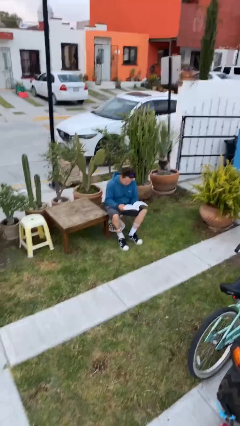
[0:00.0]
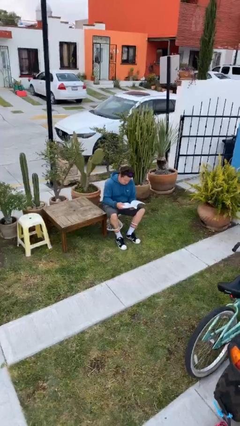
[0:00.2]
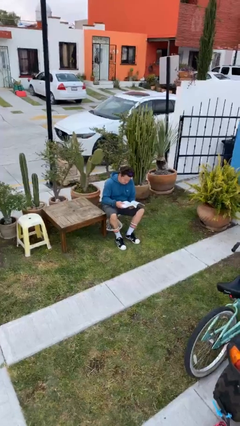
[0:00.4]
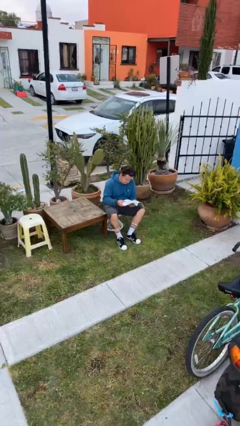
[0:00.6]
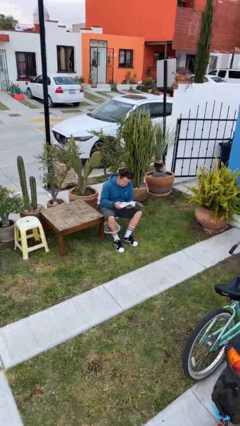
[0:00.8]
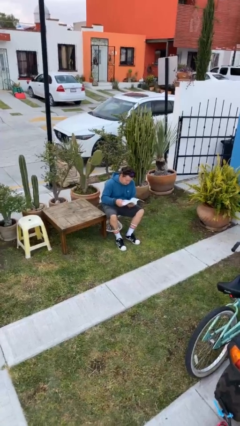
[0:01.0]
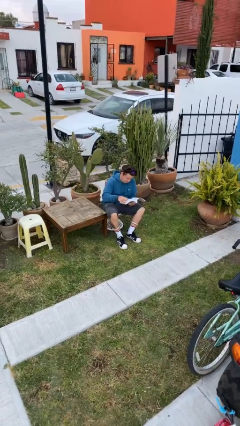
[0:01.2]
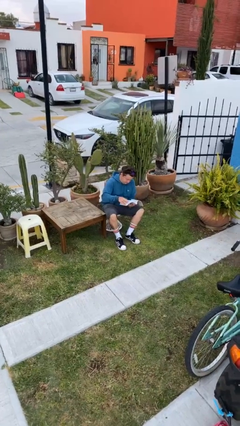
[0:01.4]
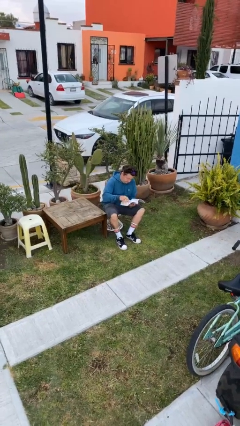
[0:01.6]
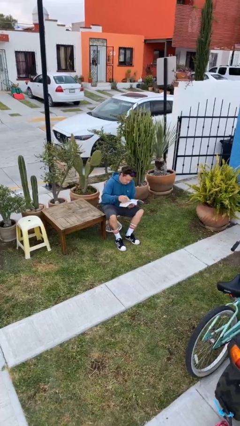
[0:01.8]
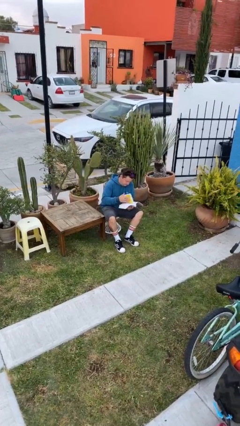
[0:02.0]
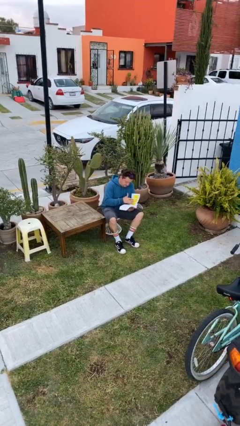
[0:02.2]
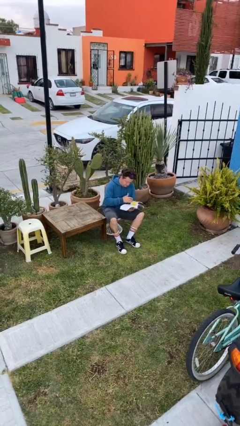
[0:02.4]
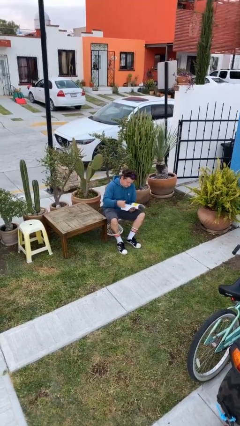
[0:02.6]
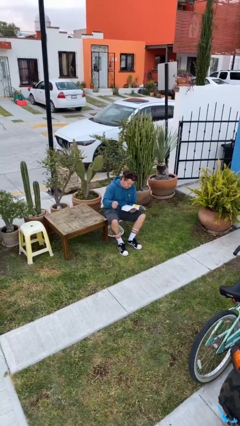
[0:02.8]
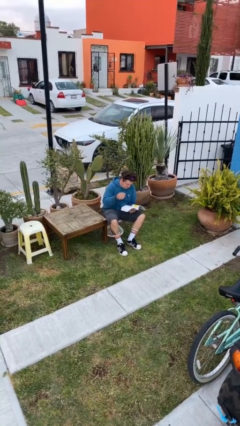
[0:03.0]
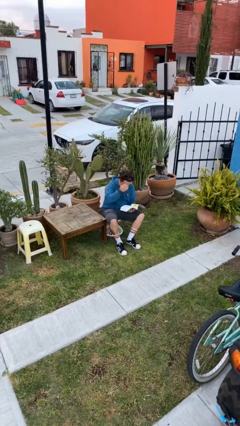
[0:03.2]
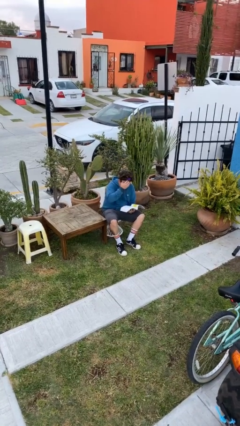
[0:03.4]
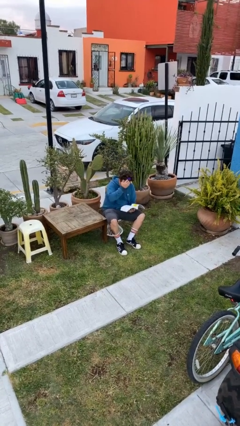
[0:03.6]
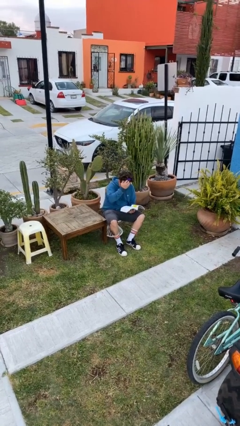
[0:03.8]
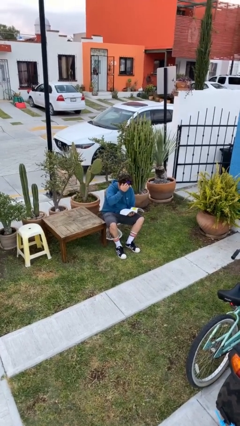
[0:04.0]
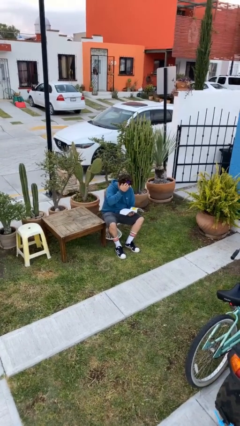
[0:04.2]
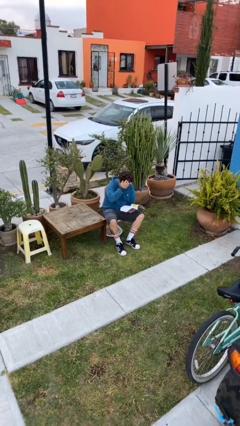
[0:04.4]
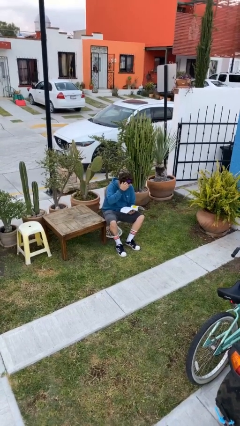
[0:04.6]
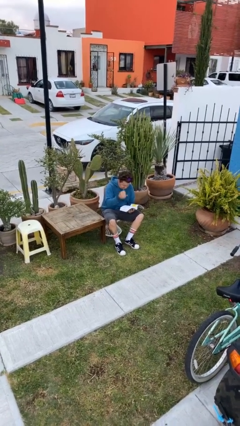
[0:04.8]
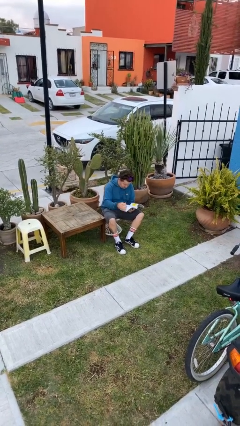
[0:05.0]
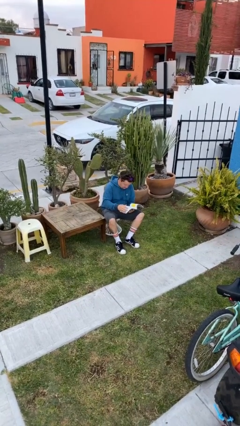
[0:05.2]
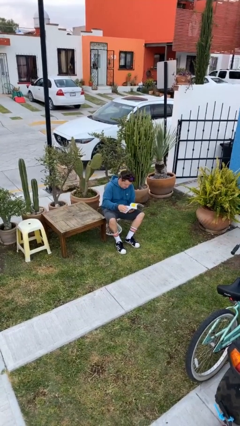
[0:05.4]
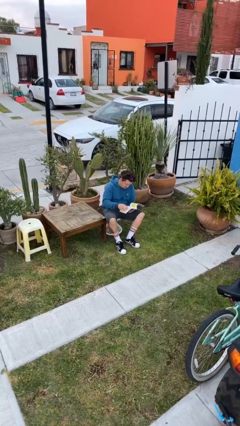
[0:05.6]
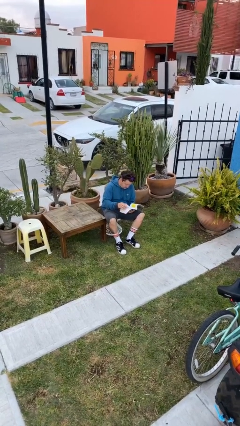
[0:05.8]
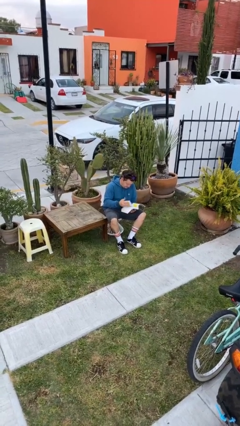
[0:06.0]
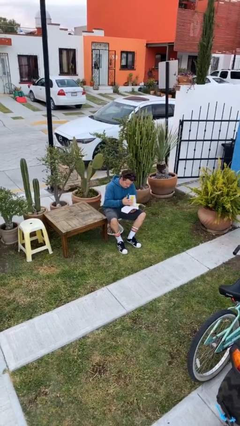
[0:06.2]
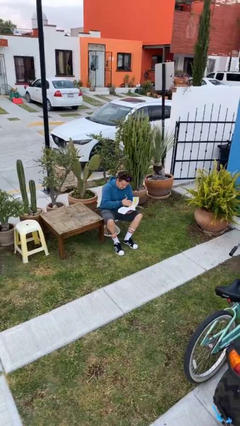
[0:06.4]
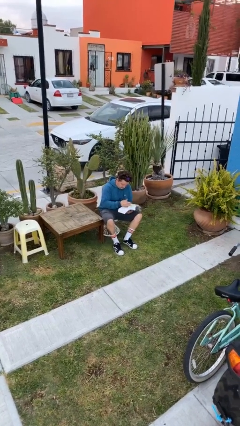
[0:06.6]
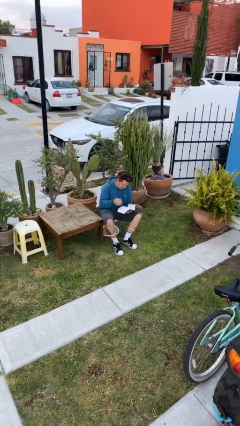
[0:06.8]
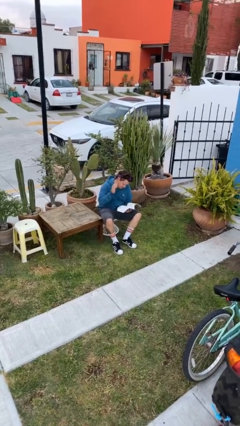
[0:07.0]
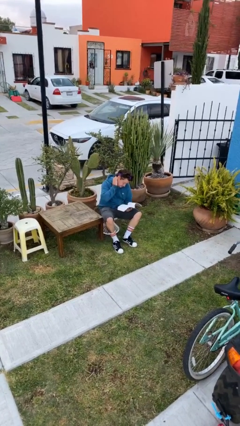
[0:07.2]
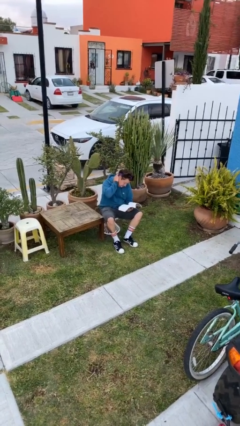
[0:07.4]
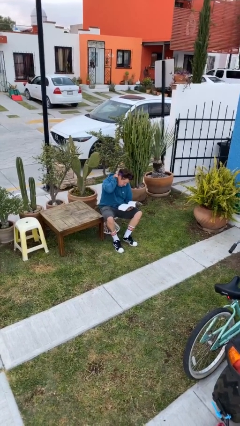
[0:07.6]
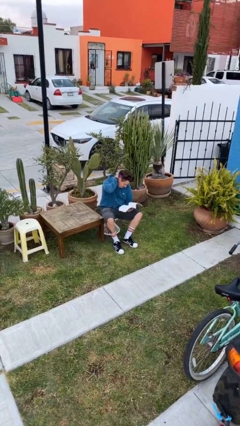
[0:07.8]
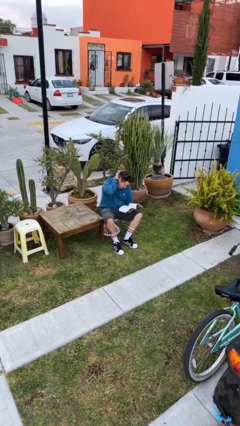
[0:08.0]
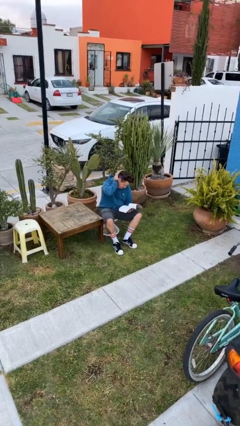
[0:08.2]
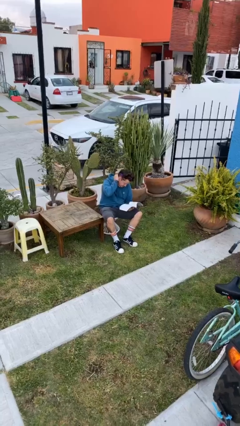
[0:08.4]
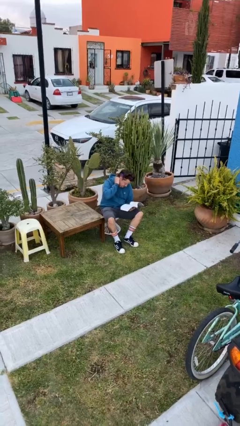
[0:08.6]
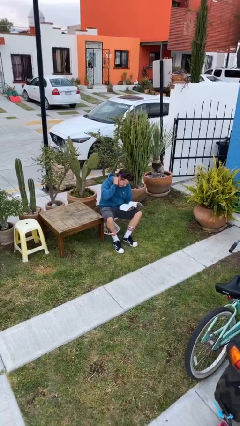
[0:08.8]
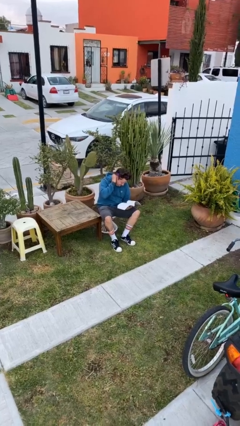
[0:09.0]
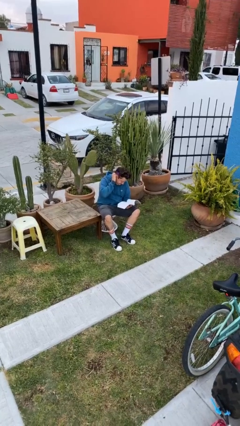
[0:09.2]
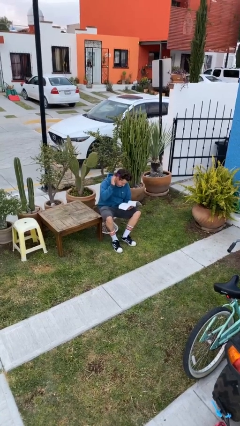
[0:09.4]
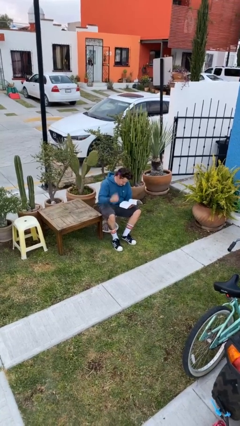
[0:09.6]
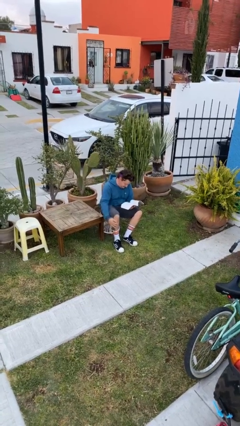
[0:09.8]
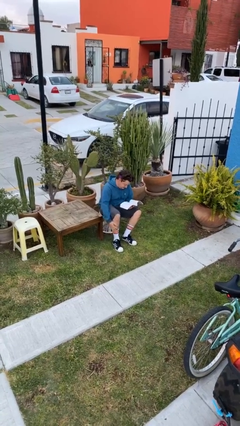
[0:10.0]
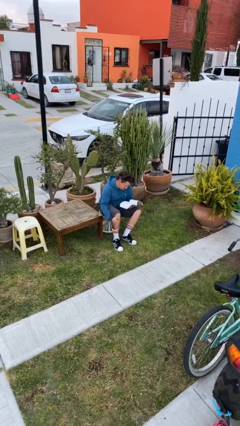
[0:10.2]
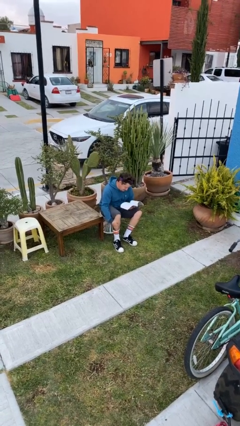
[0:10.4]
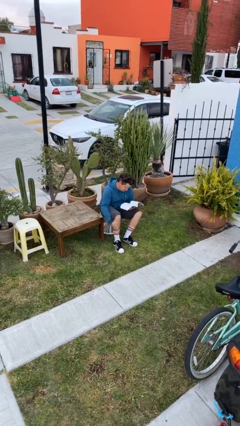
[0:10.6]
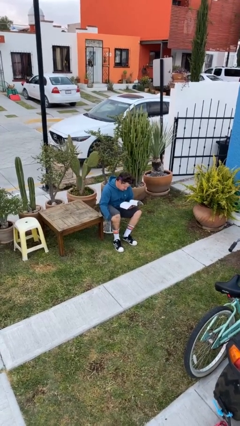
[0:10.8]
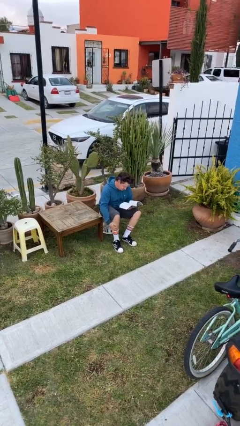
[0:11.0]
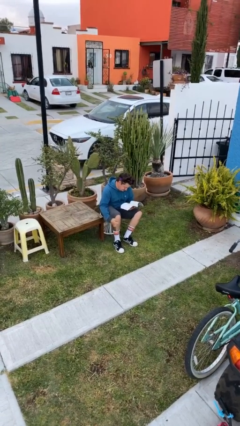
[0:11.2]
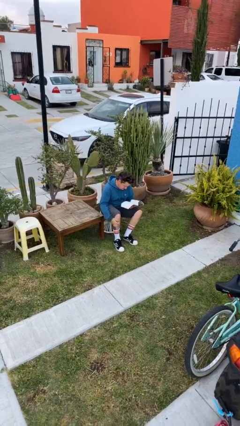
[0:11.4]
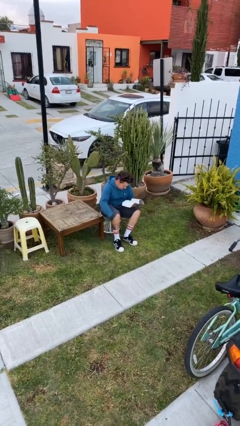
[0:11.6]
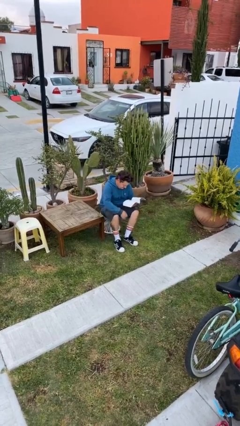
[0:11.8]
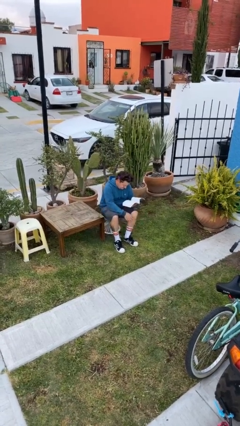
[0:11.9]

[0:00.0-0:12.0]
person reads document

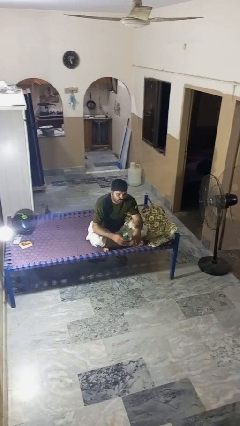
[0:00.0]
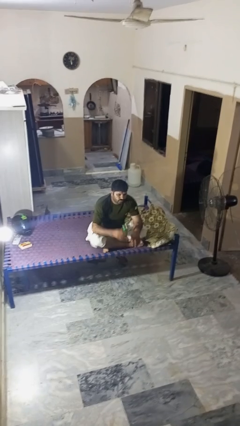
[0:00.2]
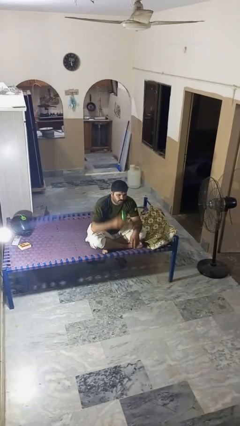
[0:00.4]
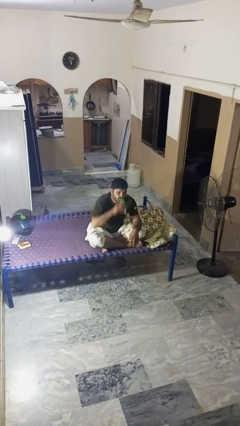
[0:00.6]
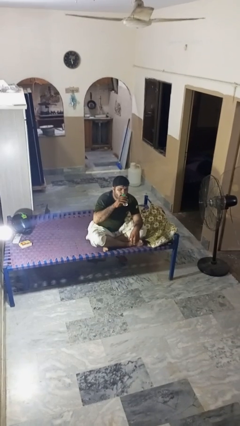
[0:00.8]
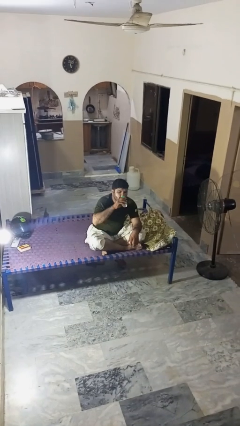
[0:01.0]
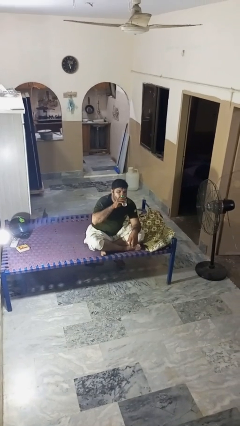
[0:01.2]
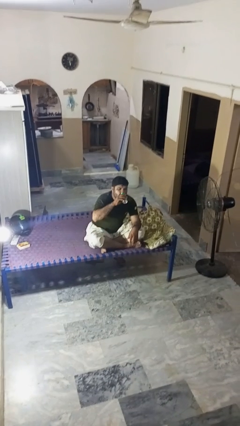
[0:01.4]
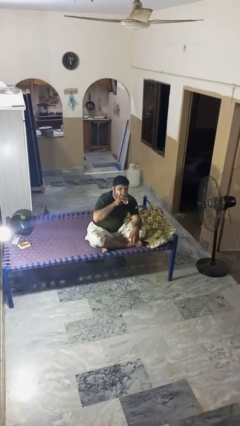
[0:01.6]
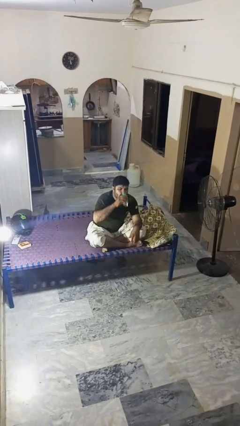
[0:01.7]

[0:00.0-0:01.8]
person drinks from beverage can

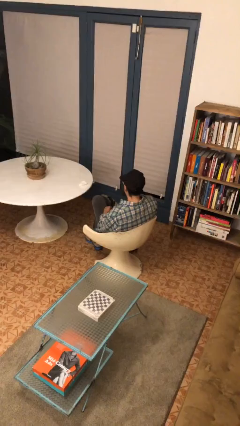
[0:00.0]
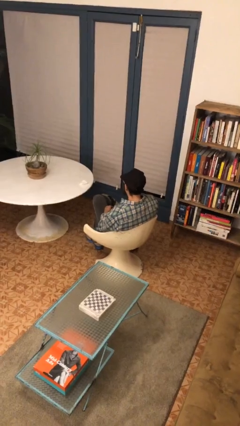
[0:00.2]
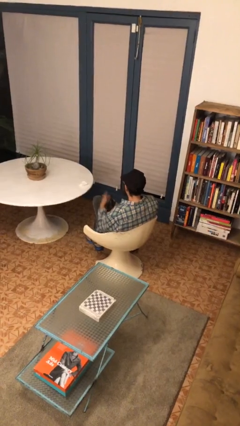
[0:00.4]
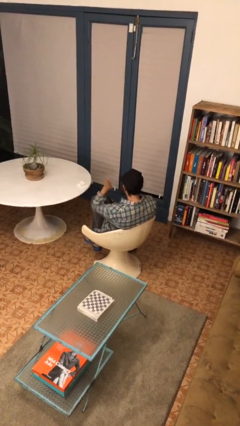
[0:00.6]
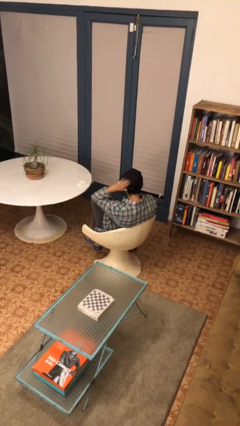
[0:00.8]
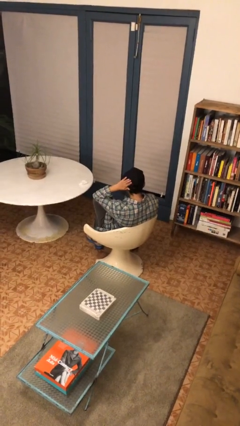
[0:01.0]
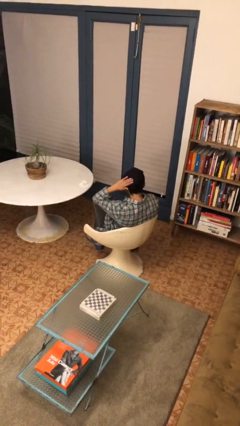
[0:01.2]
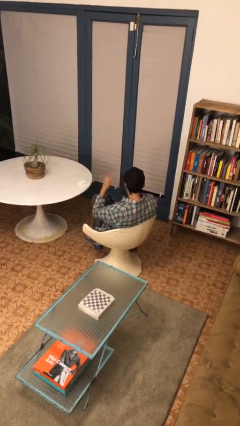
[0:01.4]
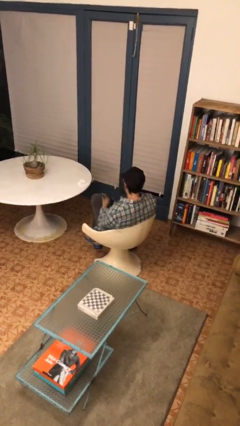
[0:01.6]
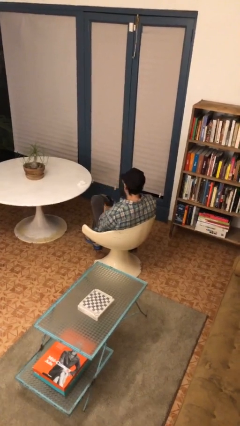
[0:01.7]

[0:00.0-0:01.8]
person pats head

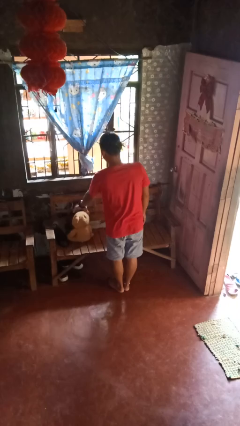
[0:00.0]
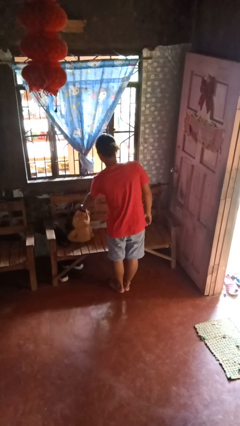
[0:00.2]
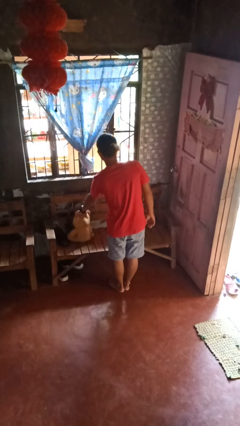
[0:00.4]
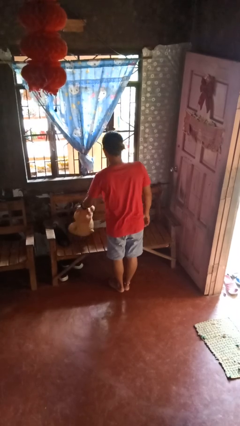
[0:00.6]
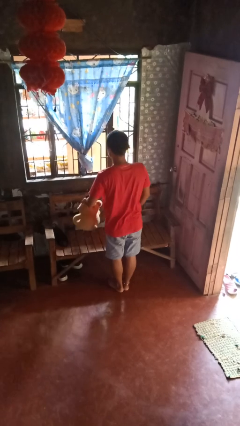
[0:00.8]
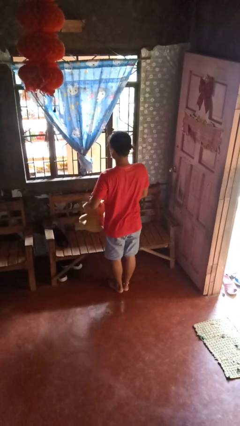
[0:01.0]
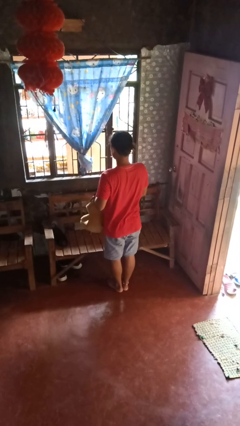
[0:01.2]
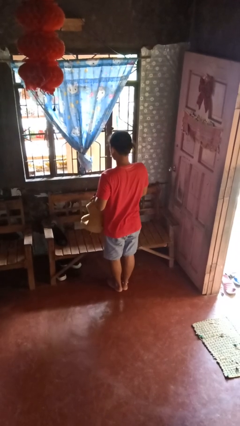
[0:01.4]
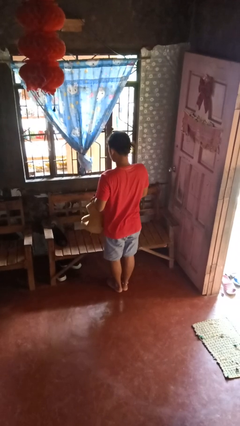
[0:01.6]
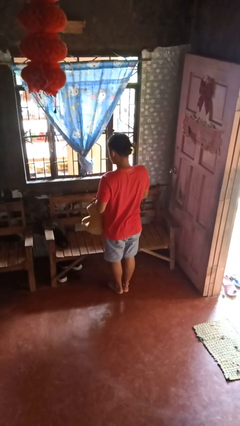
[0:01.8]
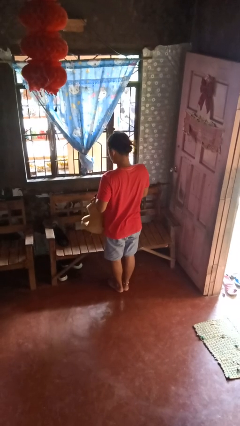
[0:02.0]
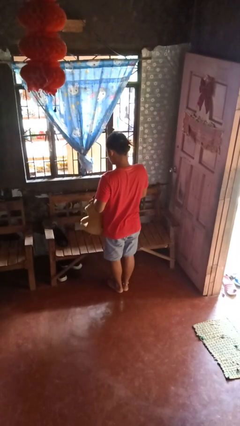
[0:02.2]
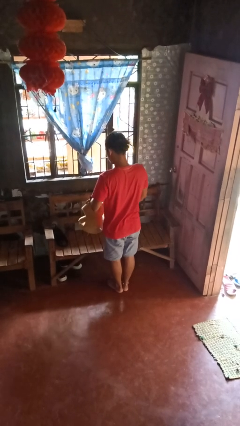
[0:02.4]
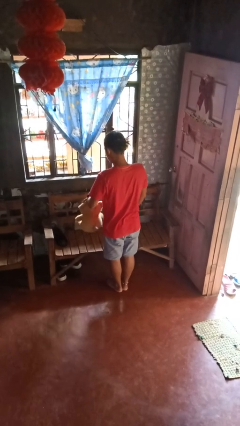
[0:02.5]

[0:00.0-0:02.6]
person picks up object from couch
